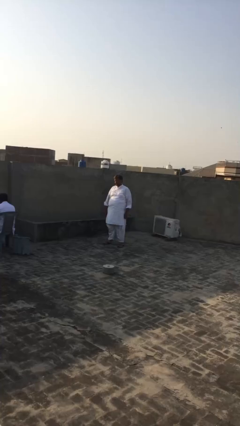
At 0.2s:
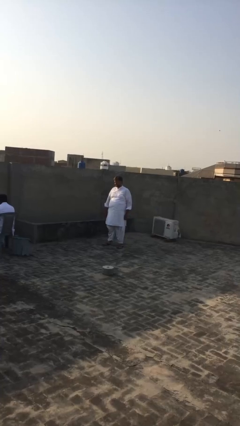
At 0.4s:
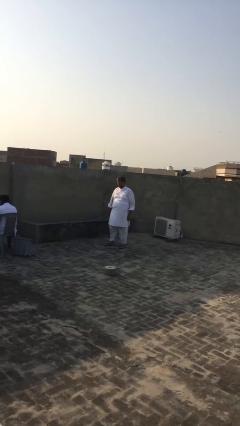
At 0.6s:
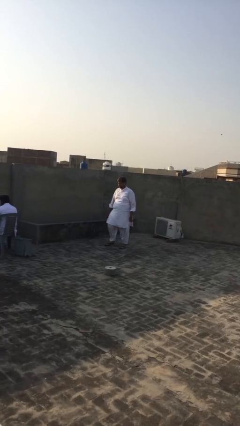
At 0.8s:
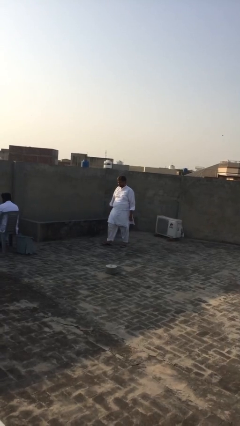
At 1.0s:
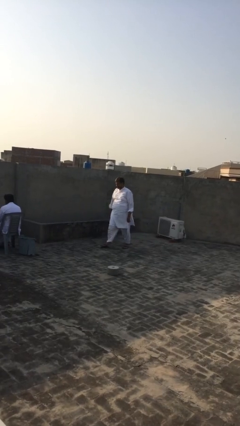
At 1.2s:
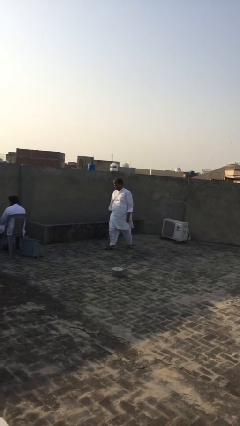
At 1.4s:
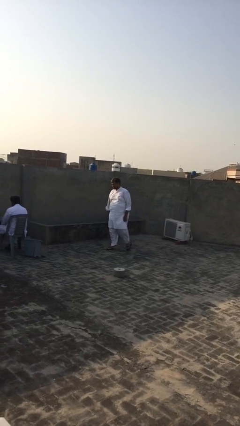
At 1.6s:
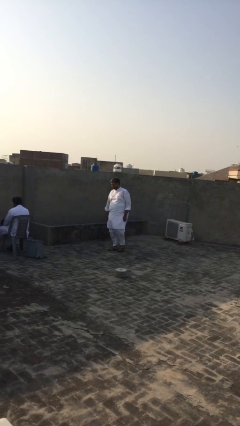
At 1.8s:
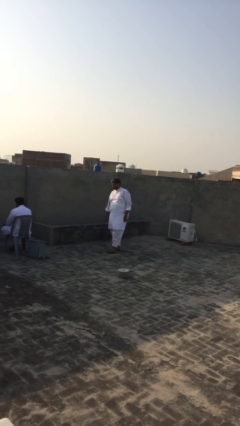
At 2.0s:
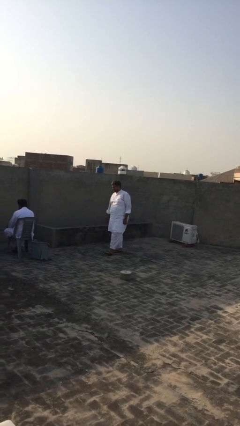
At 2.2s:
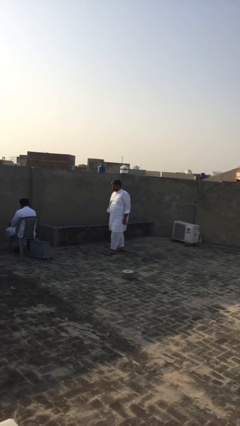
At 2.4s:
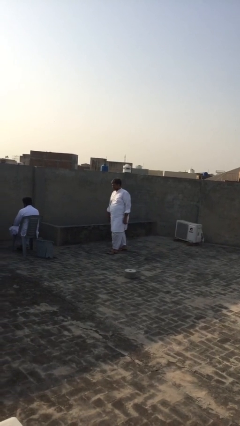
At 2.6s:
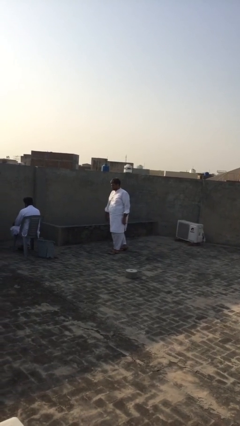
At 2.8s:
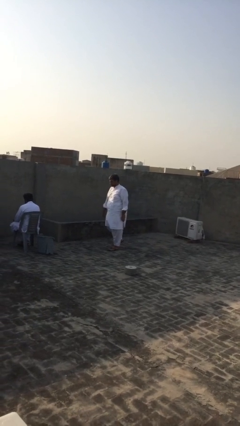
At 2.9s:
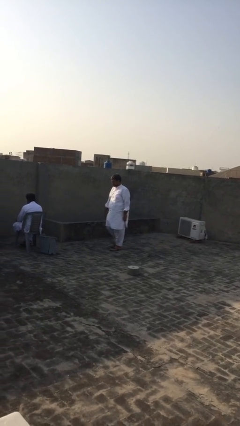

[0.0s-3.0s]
person steals object from person

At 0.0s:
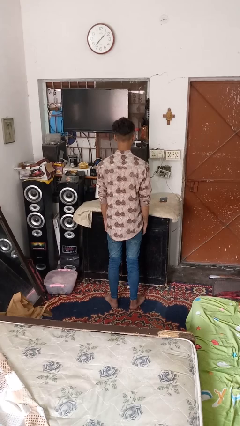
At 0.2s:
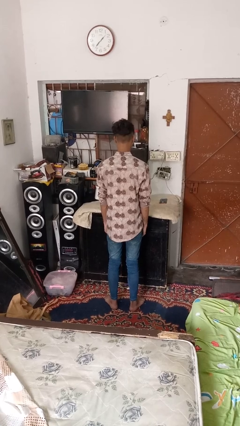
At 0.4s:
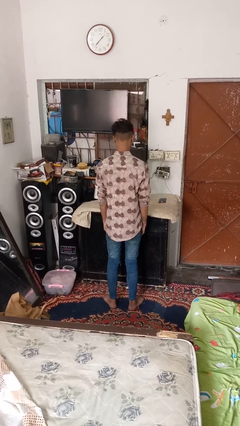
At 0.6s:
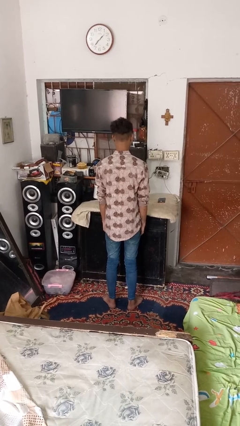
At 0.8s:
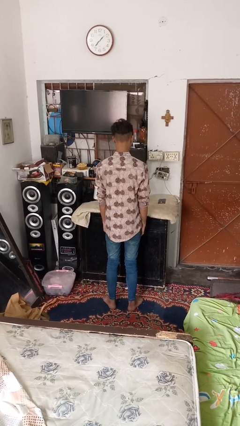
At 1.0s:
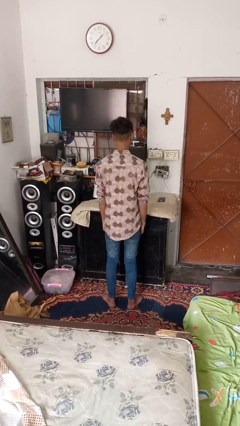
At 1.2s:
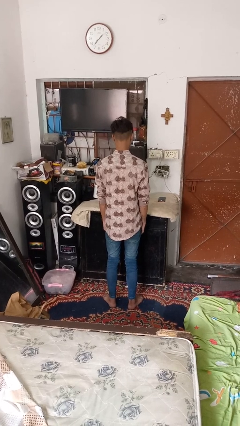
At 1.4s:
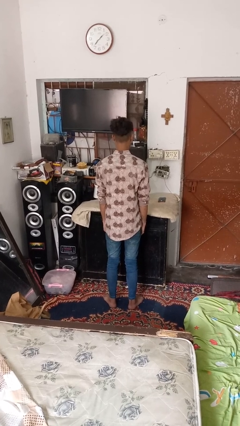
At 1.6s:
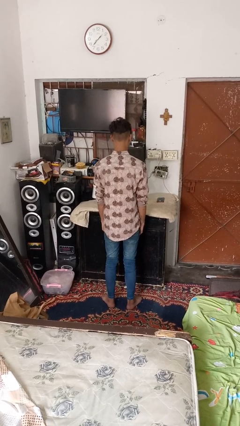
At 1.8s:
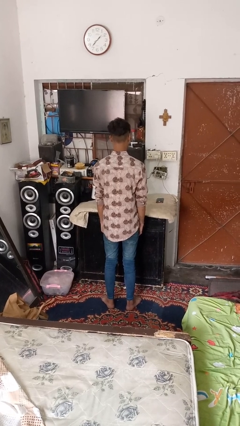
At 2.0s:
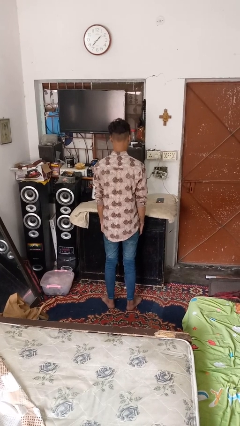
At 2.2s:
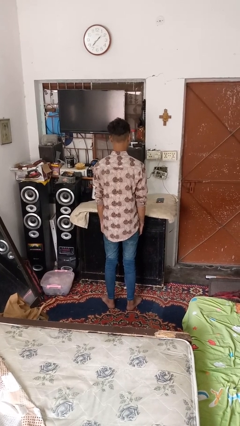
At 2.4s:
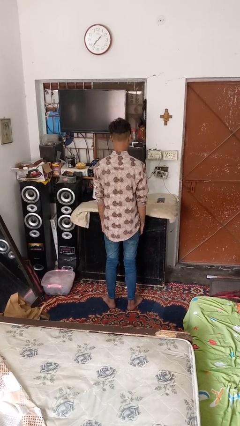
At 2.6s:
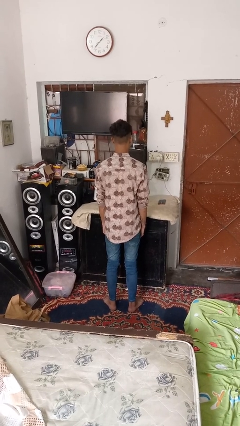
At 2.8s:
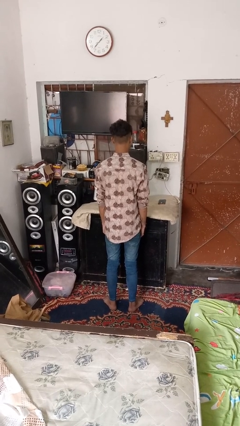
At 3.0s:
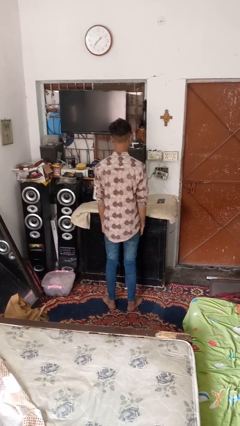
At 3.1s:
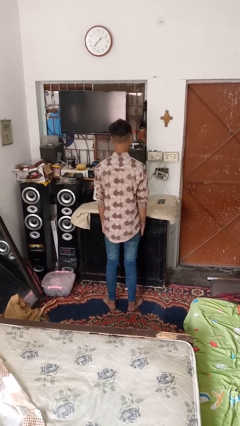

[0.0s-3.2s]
person nods head

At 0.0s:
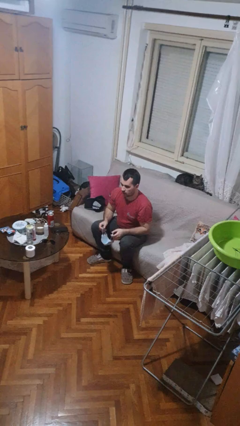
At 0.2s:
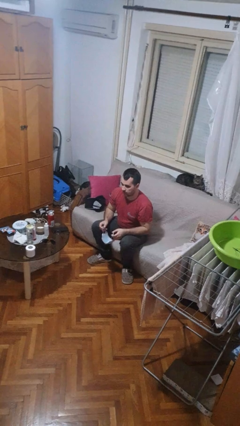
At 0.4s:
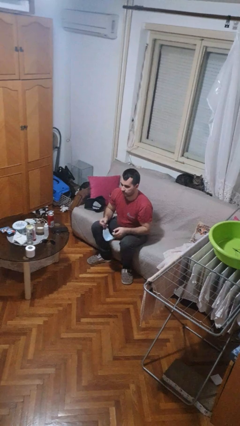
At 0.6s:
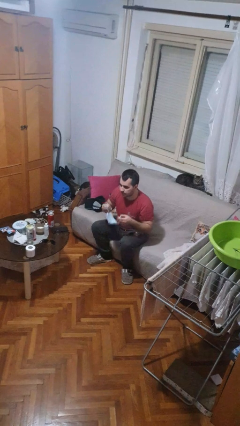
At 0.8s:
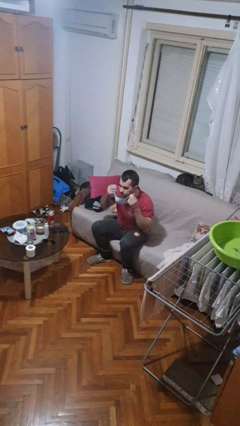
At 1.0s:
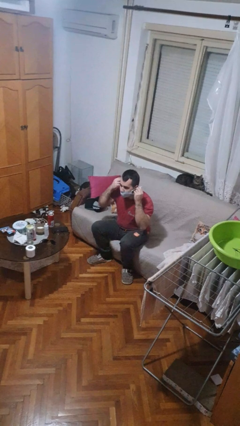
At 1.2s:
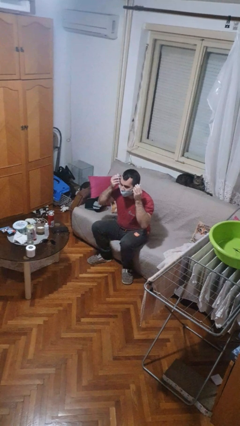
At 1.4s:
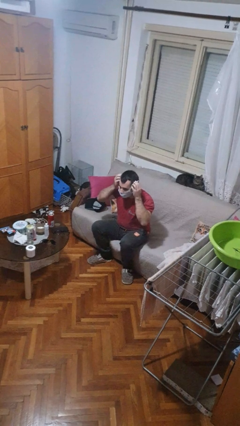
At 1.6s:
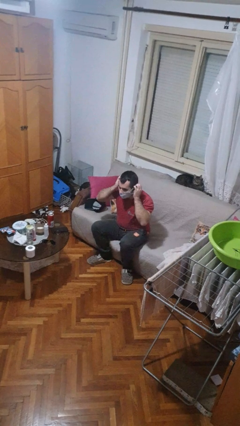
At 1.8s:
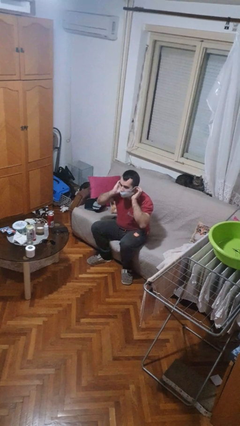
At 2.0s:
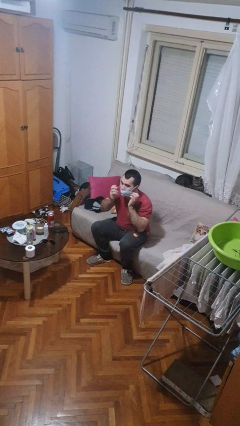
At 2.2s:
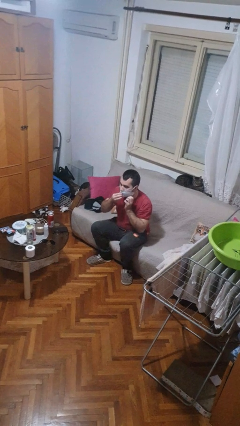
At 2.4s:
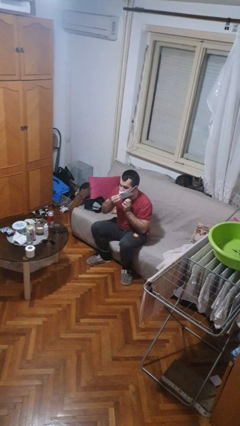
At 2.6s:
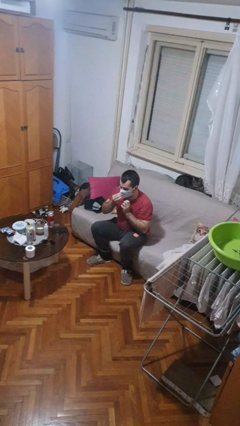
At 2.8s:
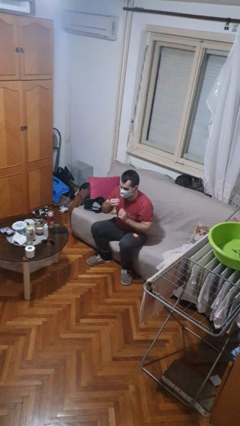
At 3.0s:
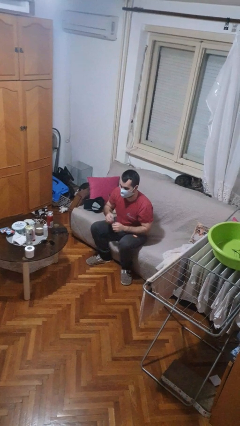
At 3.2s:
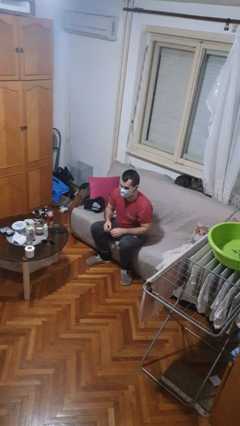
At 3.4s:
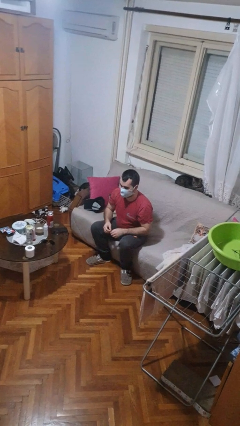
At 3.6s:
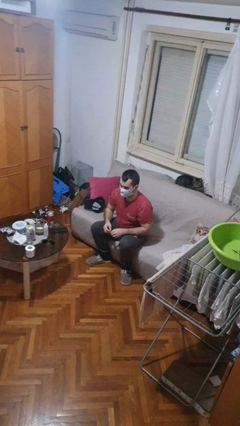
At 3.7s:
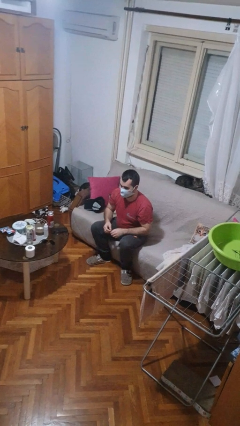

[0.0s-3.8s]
person puts on facemask

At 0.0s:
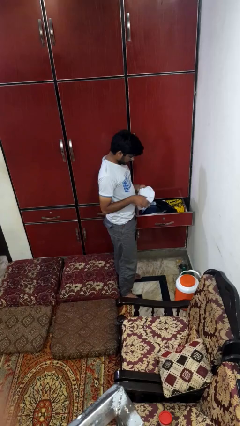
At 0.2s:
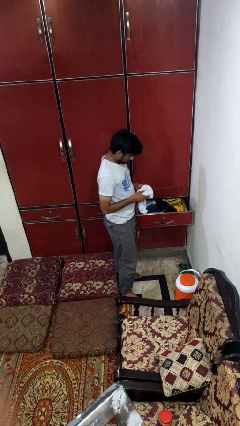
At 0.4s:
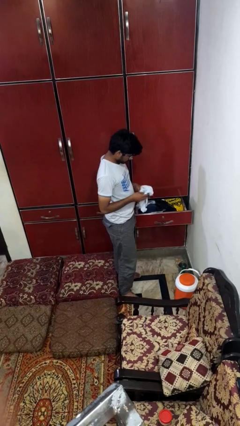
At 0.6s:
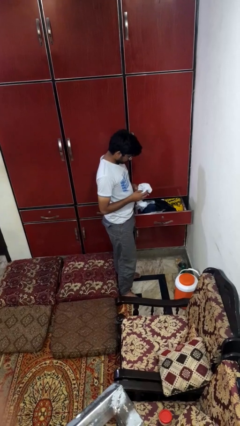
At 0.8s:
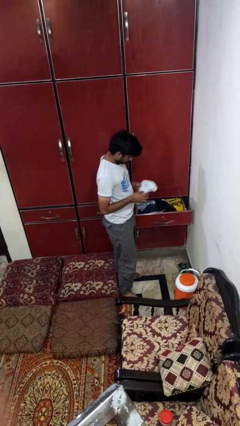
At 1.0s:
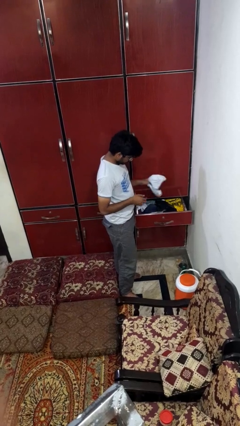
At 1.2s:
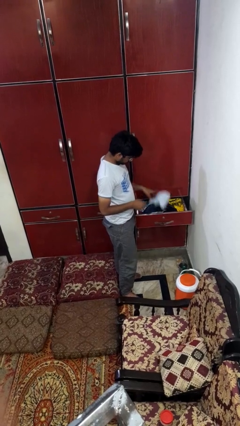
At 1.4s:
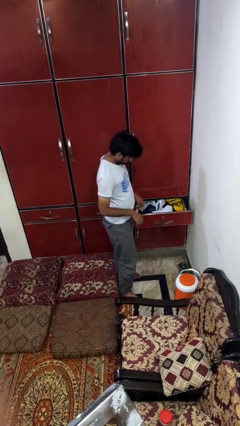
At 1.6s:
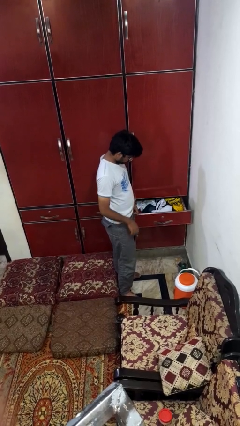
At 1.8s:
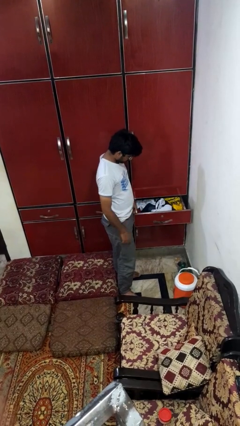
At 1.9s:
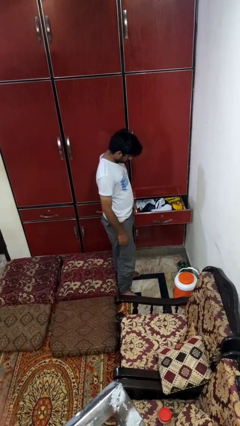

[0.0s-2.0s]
person puts clothes into dresser

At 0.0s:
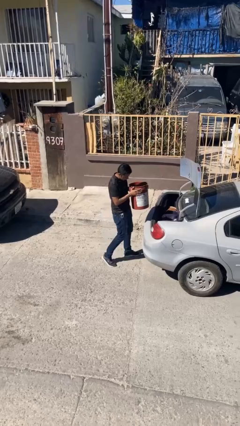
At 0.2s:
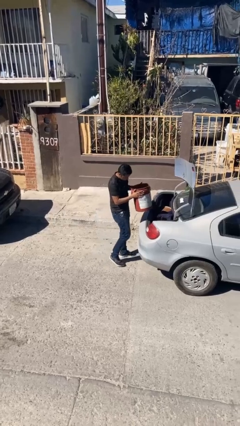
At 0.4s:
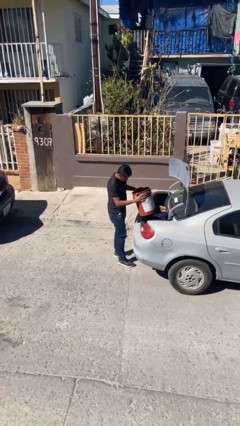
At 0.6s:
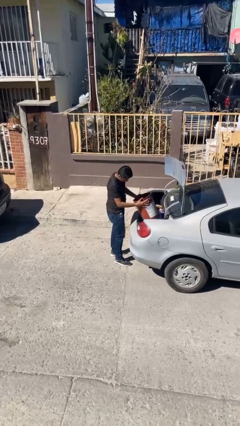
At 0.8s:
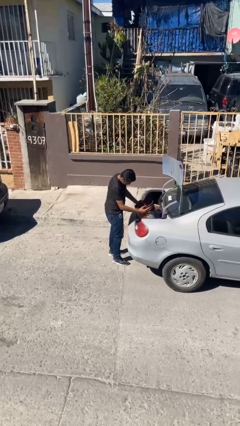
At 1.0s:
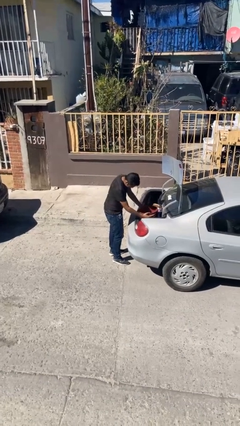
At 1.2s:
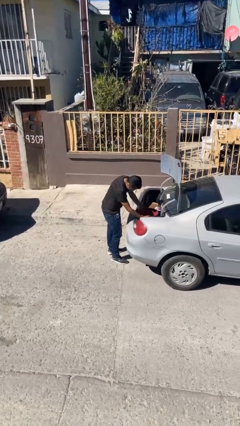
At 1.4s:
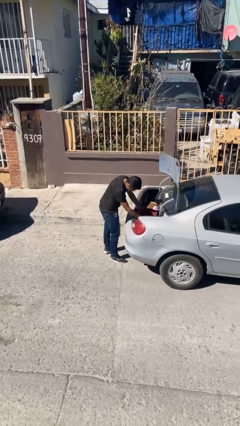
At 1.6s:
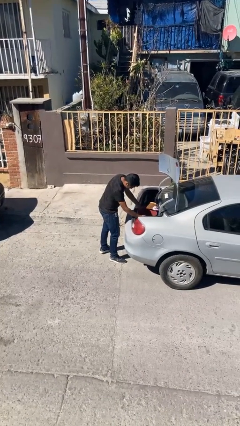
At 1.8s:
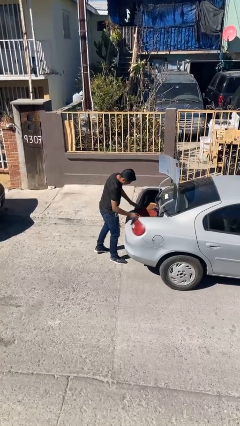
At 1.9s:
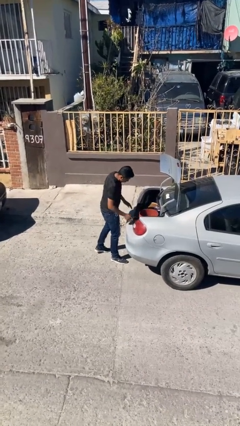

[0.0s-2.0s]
person loads car

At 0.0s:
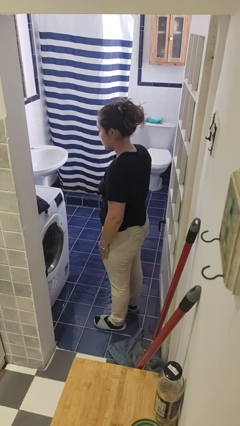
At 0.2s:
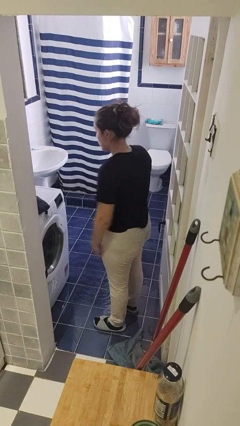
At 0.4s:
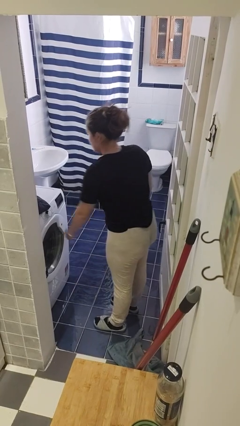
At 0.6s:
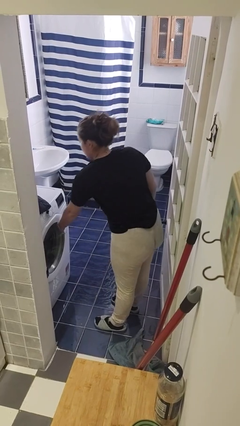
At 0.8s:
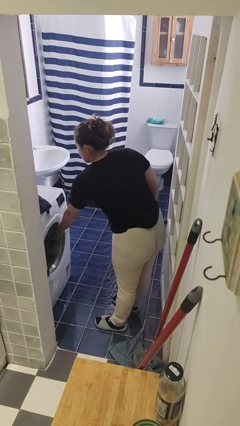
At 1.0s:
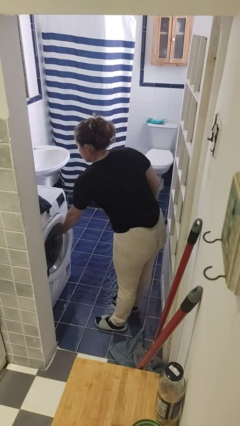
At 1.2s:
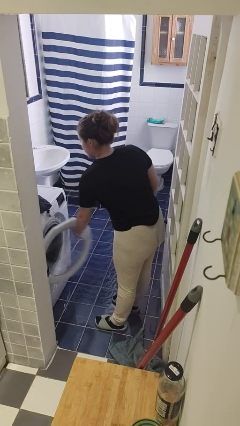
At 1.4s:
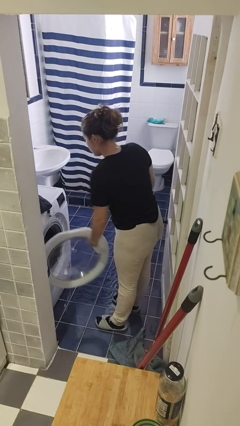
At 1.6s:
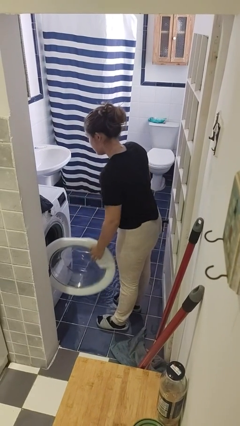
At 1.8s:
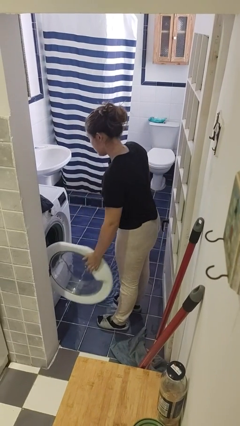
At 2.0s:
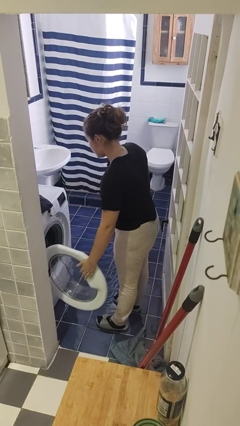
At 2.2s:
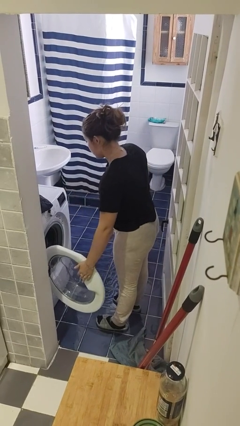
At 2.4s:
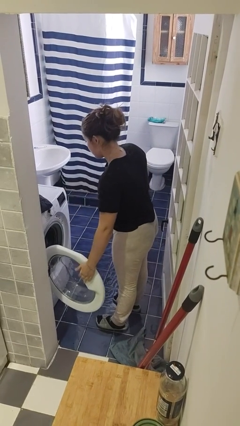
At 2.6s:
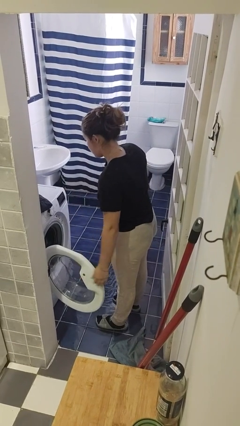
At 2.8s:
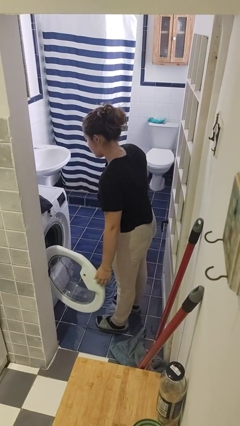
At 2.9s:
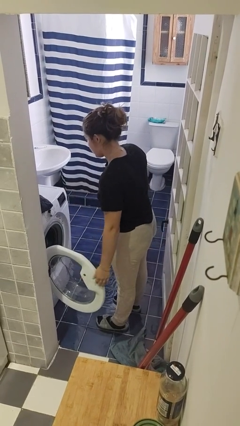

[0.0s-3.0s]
person opens clothes washer

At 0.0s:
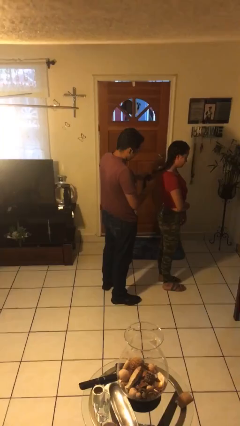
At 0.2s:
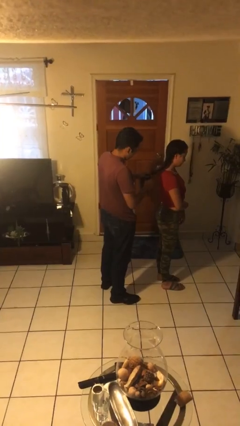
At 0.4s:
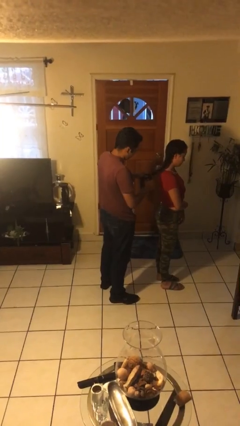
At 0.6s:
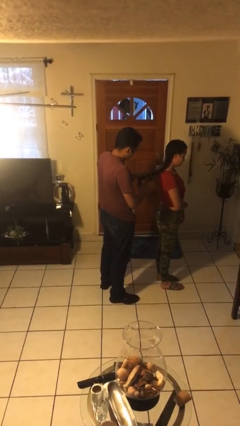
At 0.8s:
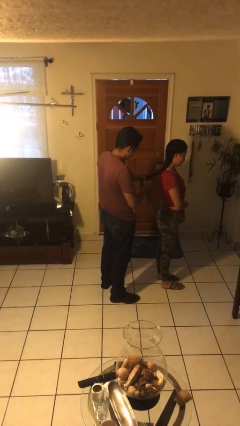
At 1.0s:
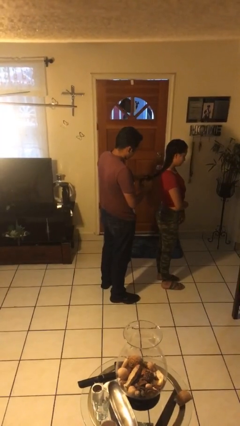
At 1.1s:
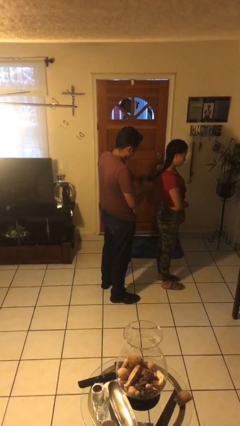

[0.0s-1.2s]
person braids hair of person
